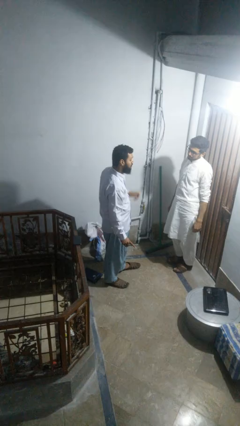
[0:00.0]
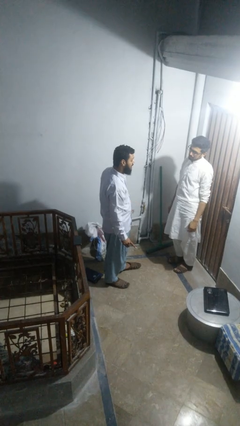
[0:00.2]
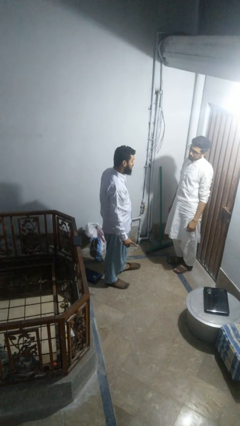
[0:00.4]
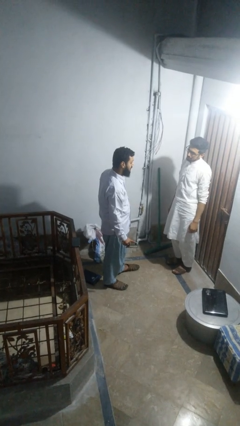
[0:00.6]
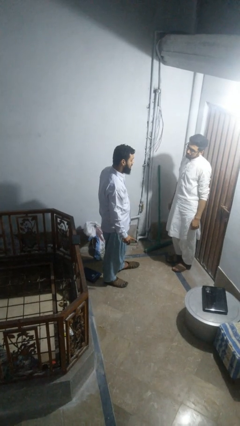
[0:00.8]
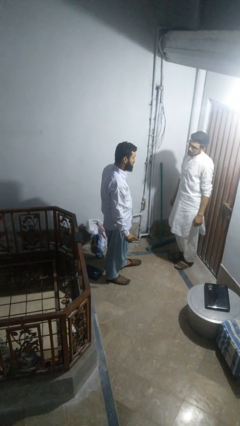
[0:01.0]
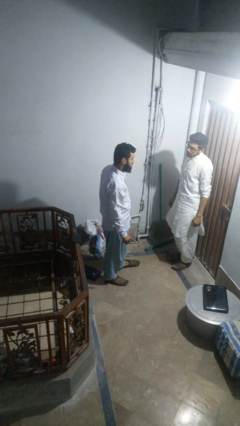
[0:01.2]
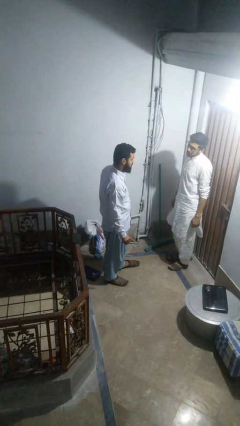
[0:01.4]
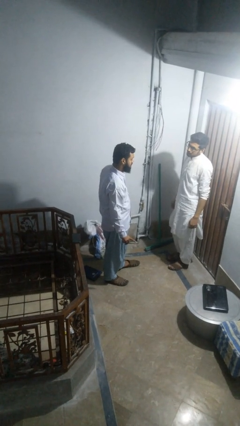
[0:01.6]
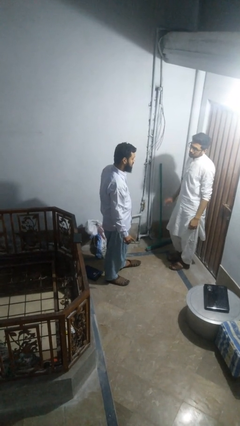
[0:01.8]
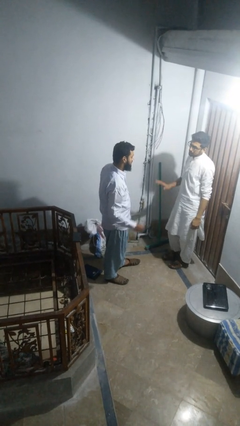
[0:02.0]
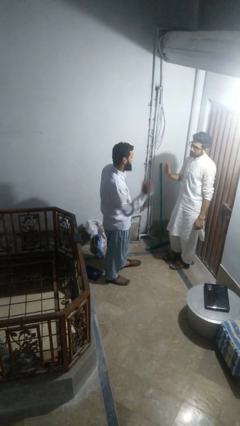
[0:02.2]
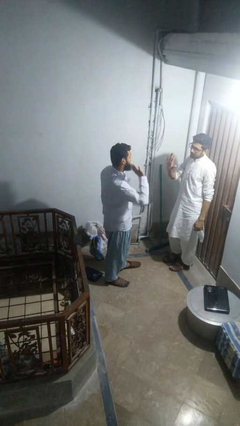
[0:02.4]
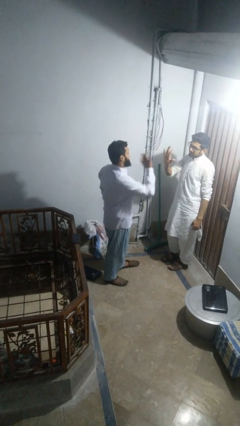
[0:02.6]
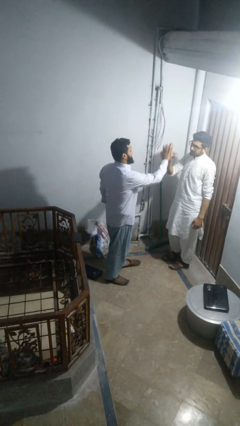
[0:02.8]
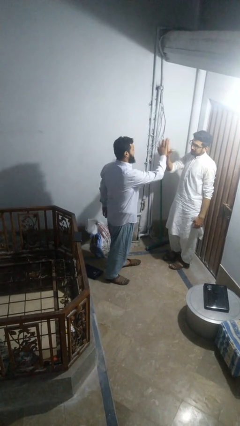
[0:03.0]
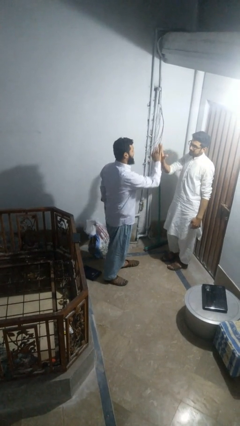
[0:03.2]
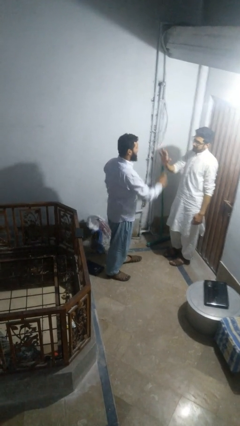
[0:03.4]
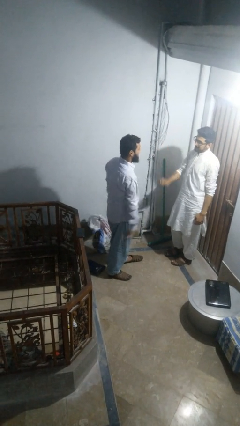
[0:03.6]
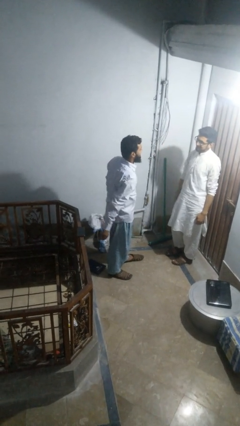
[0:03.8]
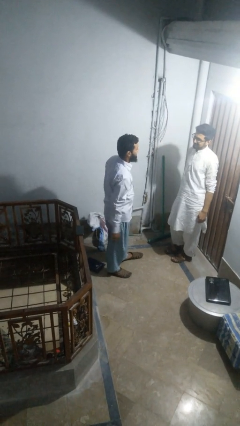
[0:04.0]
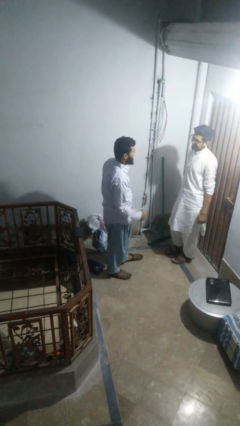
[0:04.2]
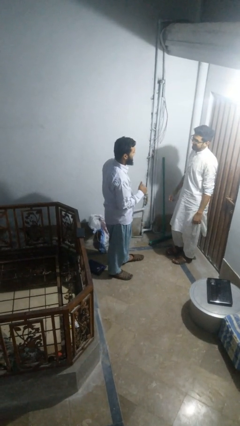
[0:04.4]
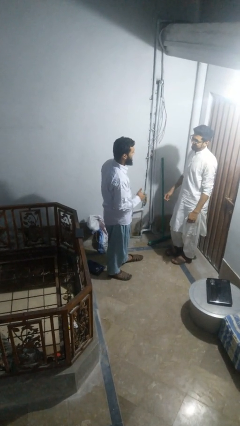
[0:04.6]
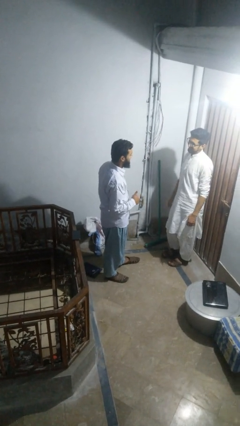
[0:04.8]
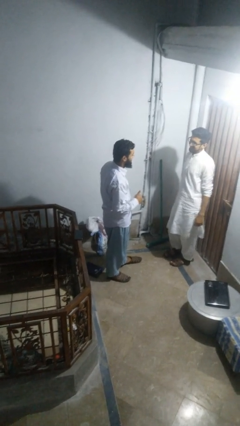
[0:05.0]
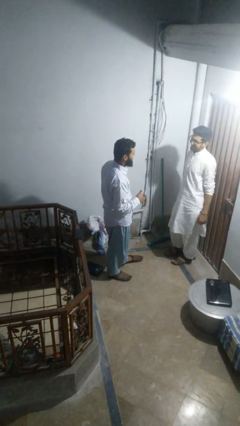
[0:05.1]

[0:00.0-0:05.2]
person highfives hand

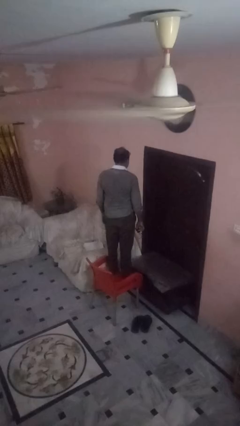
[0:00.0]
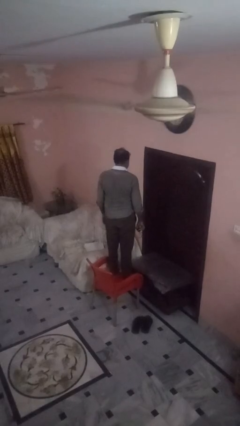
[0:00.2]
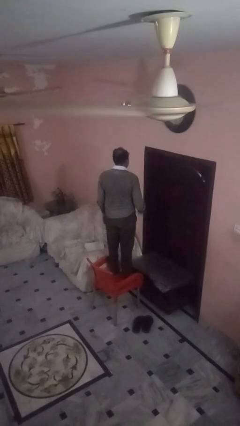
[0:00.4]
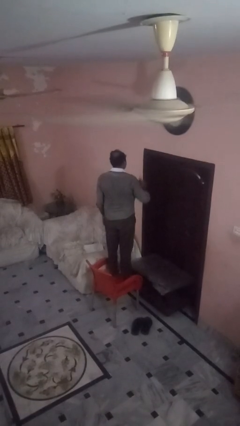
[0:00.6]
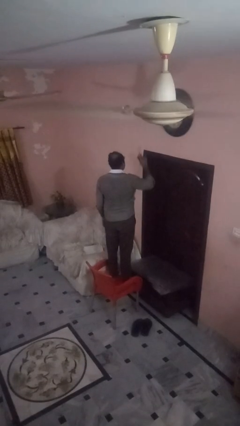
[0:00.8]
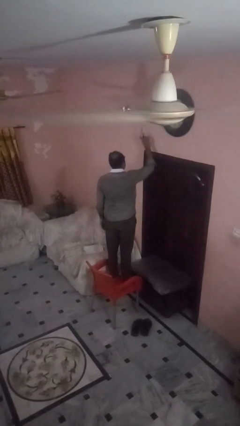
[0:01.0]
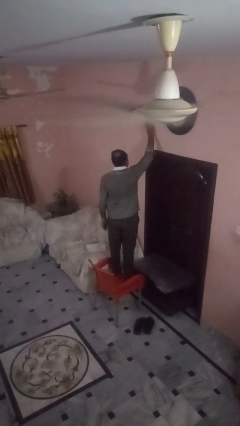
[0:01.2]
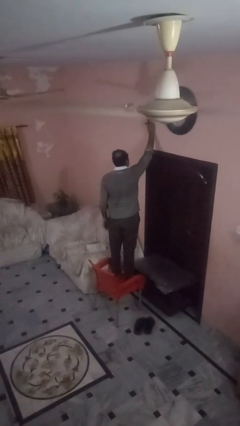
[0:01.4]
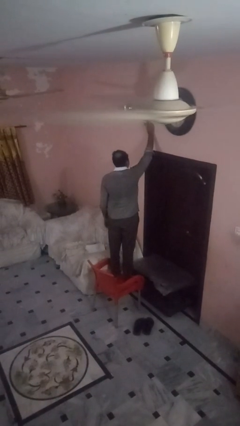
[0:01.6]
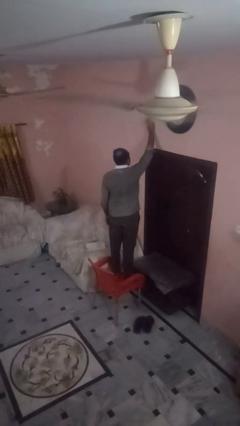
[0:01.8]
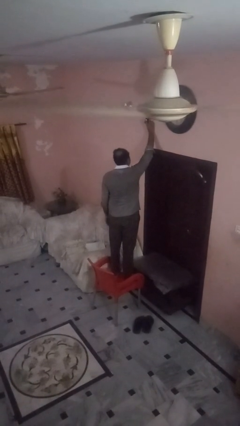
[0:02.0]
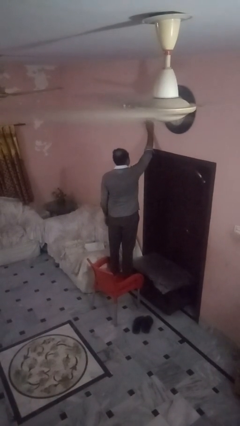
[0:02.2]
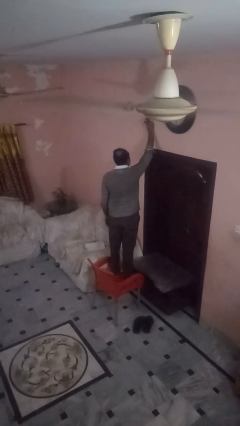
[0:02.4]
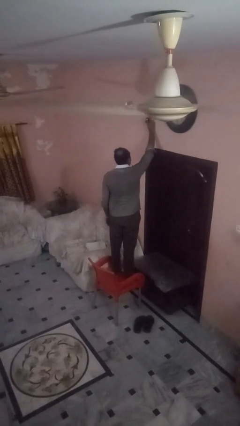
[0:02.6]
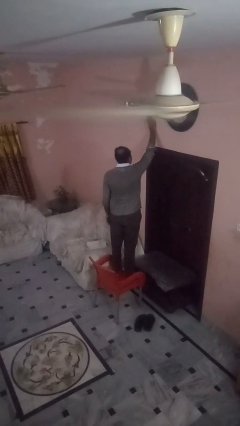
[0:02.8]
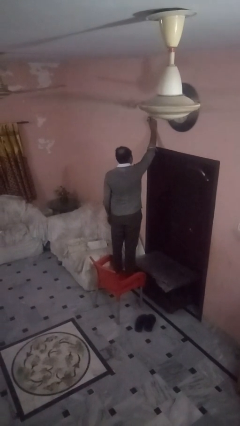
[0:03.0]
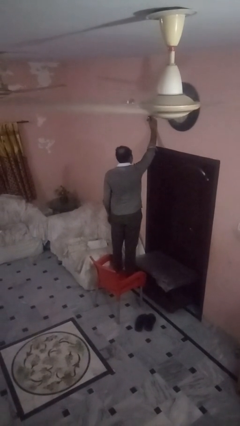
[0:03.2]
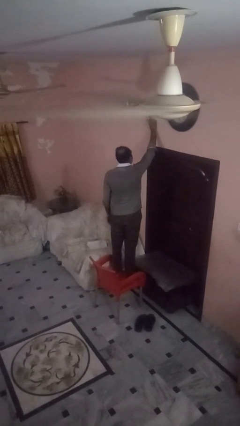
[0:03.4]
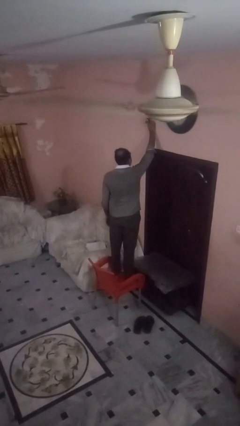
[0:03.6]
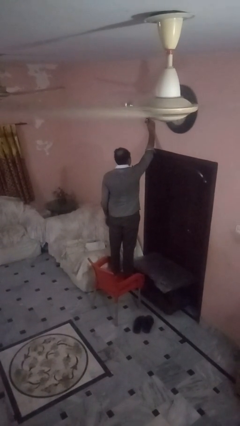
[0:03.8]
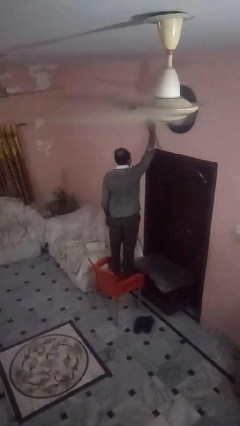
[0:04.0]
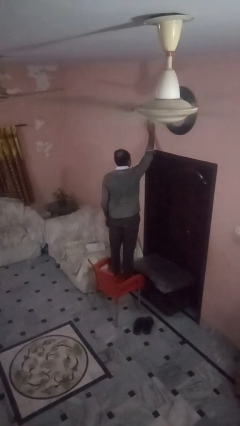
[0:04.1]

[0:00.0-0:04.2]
person puts up smoke detector

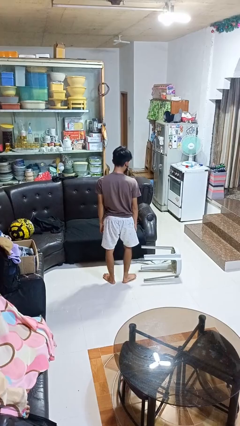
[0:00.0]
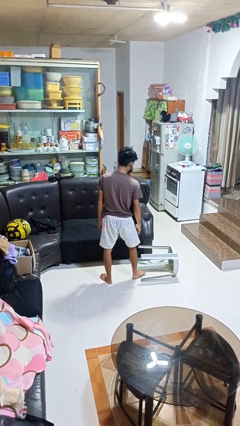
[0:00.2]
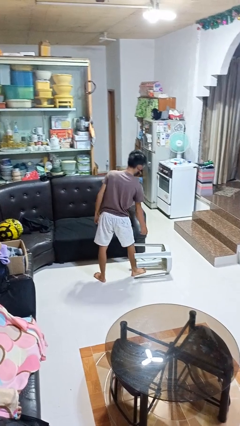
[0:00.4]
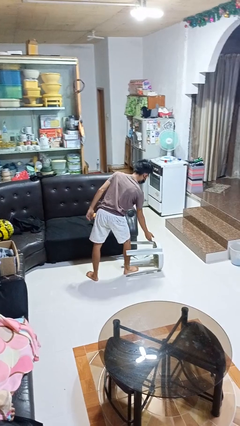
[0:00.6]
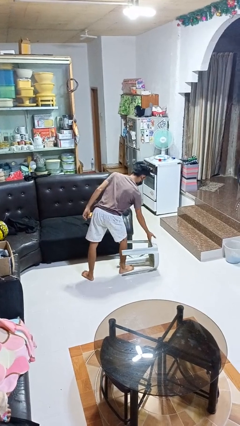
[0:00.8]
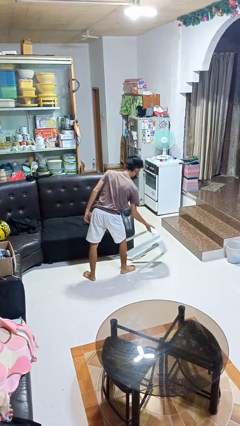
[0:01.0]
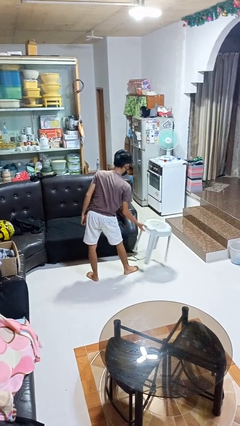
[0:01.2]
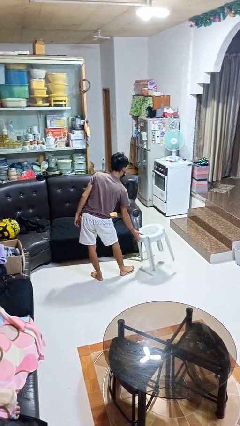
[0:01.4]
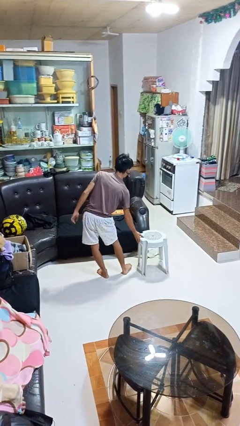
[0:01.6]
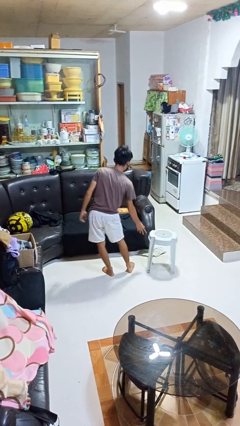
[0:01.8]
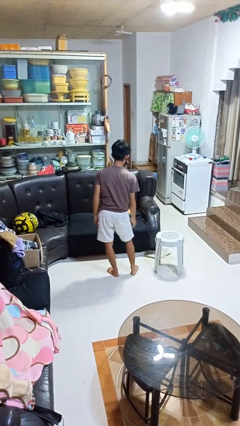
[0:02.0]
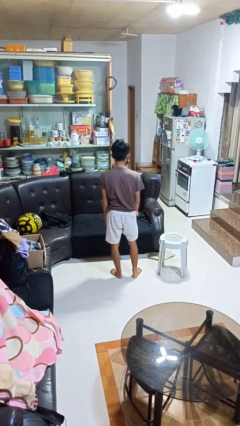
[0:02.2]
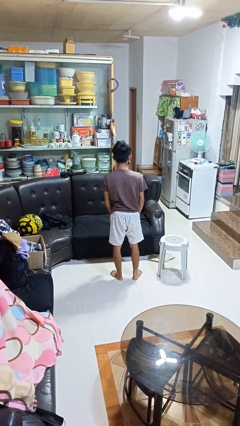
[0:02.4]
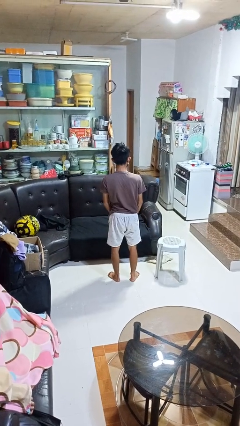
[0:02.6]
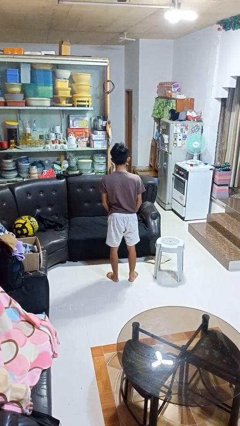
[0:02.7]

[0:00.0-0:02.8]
person sets upright furniture

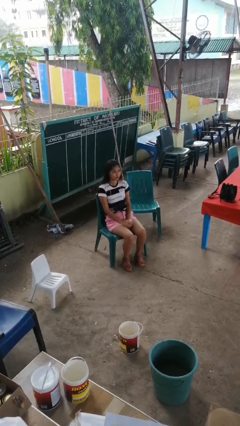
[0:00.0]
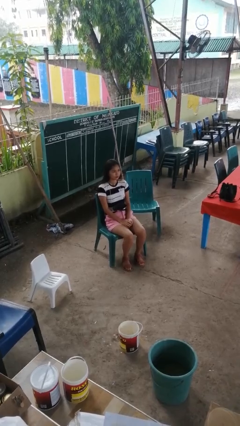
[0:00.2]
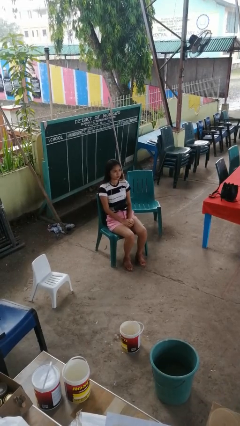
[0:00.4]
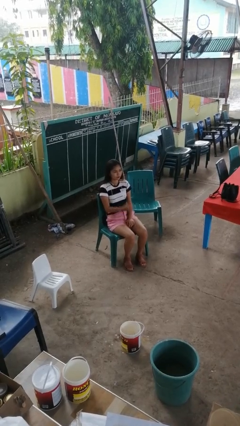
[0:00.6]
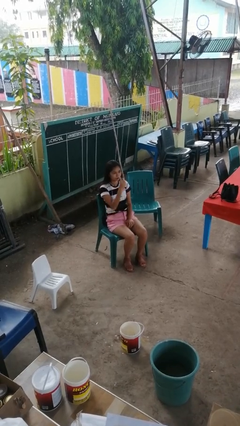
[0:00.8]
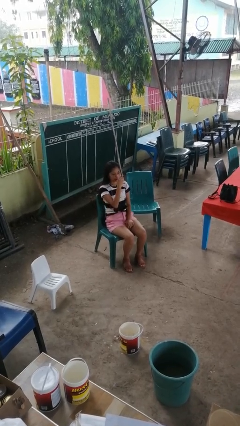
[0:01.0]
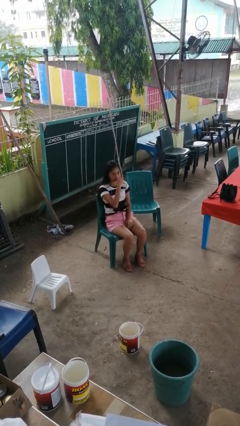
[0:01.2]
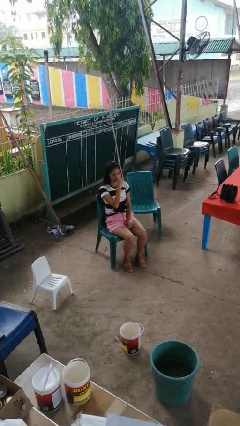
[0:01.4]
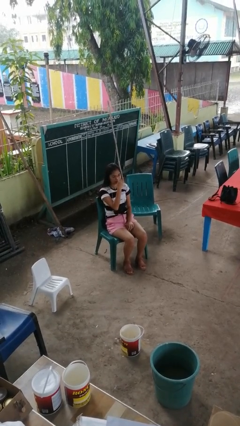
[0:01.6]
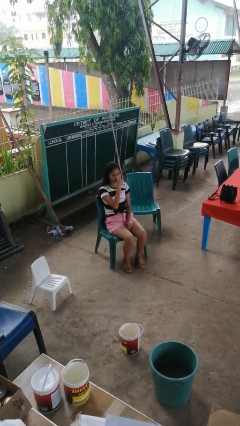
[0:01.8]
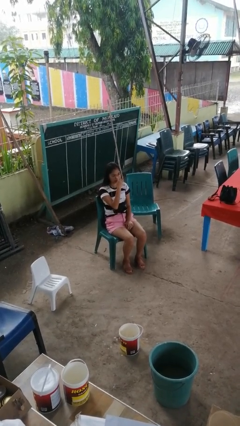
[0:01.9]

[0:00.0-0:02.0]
person gestures watch closely

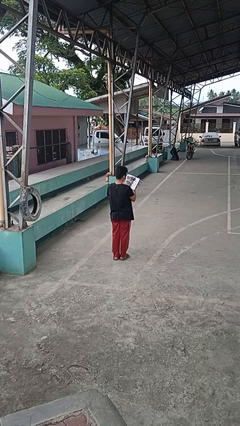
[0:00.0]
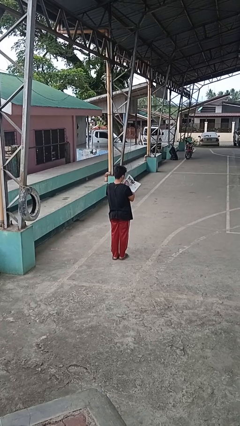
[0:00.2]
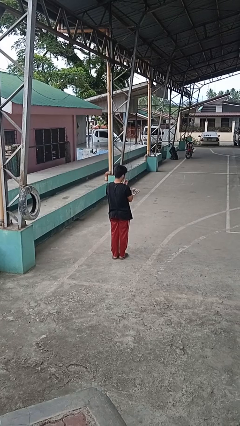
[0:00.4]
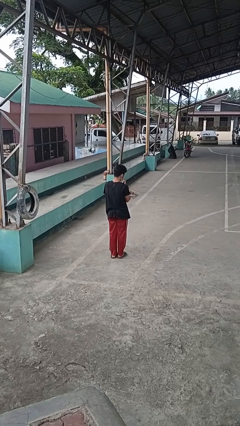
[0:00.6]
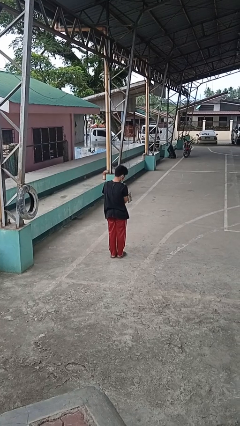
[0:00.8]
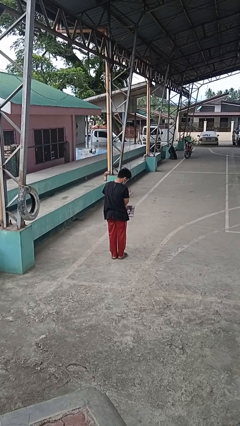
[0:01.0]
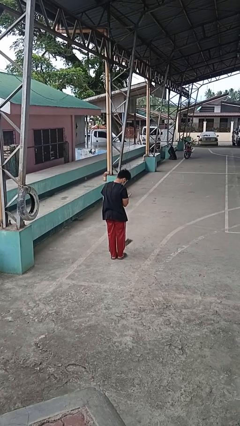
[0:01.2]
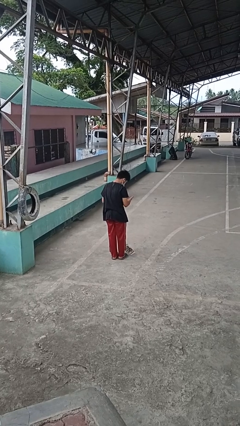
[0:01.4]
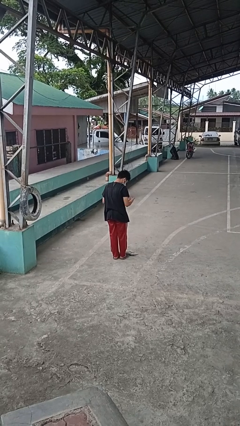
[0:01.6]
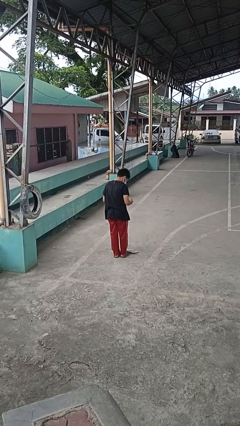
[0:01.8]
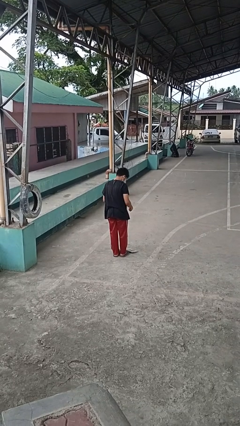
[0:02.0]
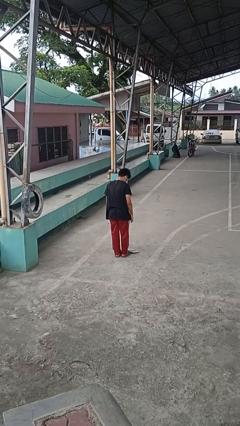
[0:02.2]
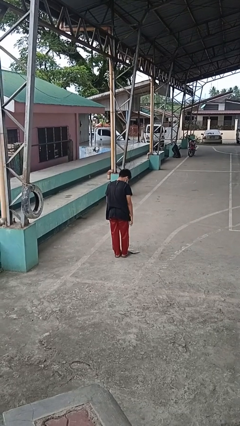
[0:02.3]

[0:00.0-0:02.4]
person drops object

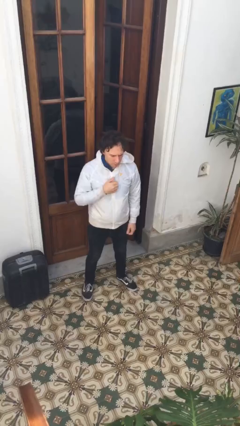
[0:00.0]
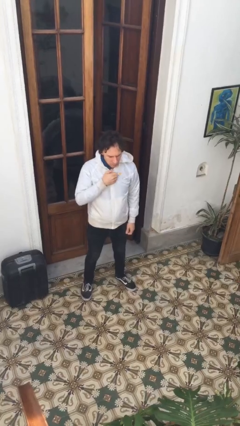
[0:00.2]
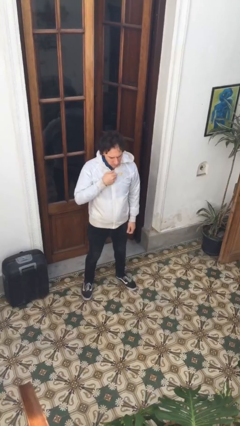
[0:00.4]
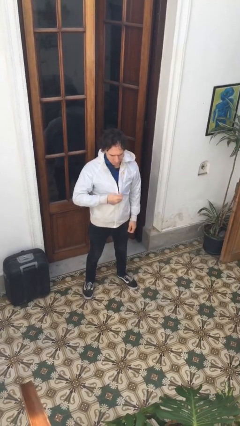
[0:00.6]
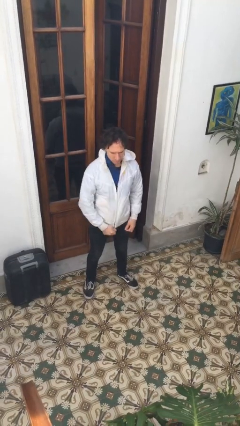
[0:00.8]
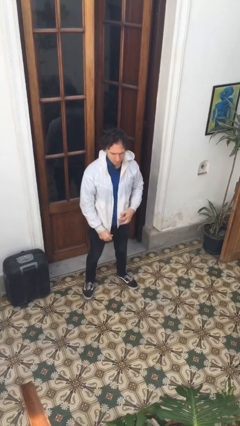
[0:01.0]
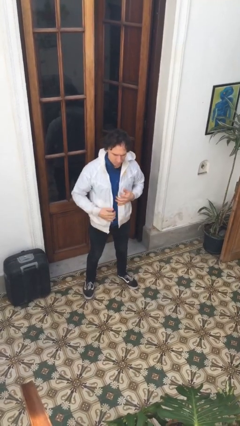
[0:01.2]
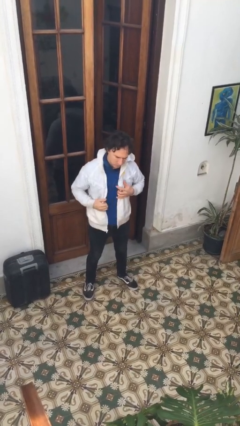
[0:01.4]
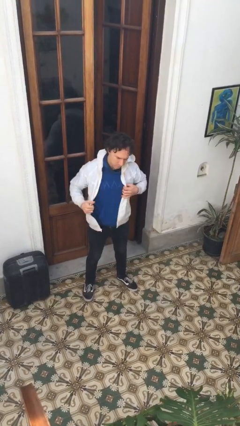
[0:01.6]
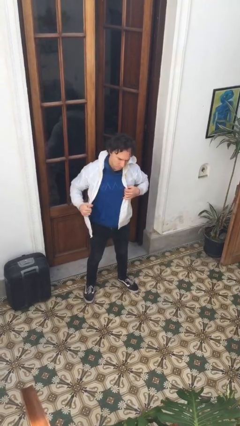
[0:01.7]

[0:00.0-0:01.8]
person unzips jacket
